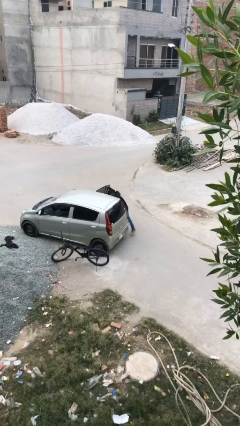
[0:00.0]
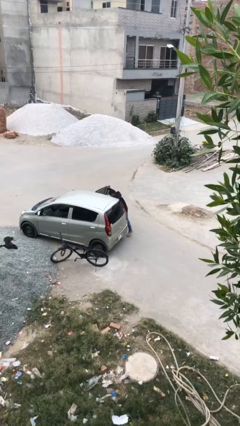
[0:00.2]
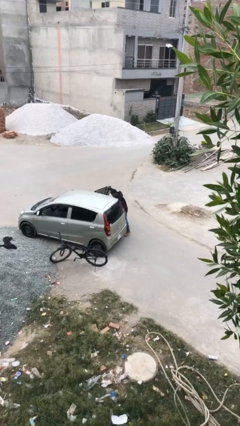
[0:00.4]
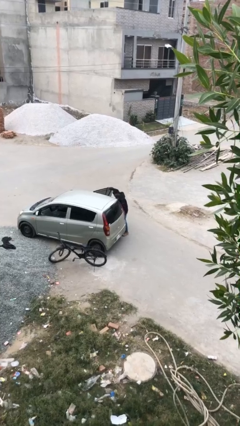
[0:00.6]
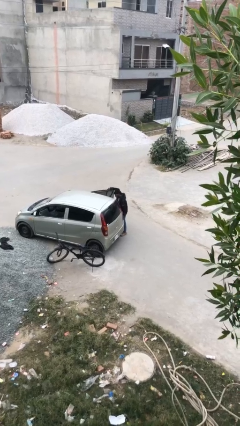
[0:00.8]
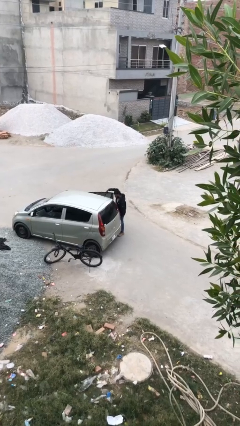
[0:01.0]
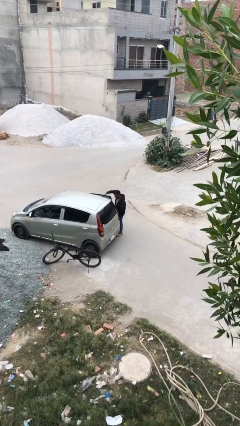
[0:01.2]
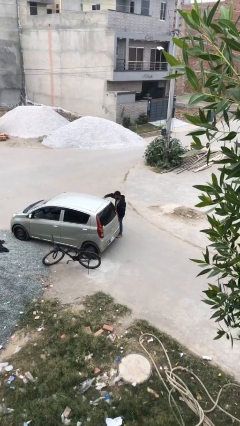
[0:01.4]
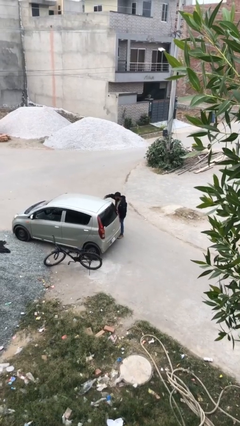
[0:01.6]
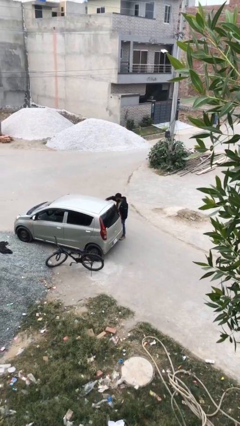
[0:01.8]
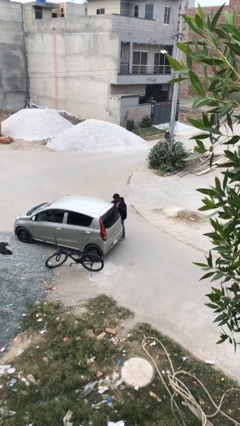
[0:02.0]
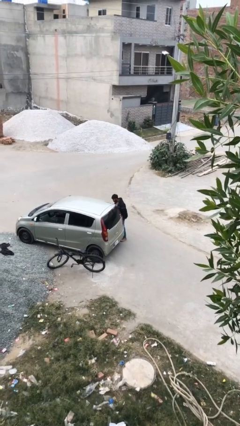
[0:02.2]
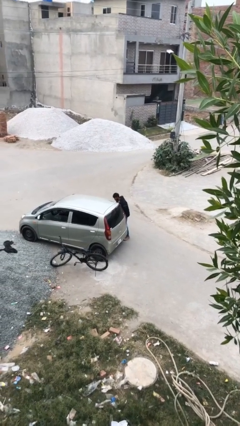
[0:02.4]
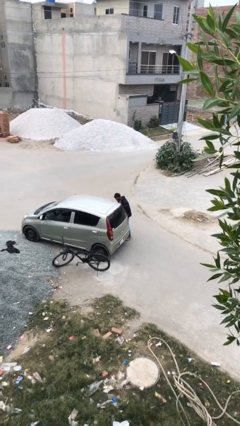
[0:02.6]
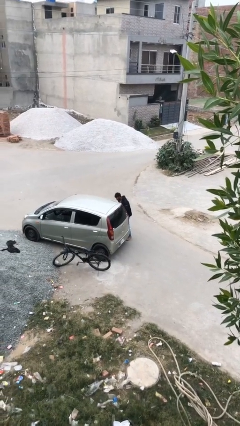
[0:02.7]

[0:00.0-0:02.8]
person closes car door

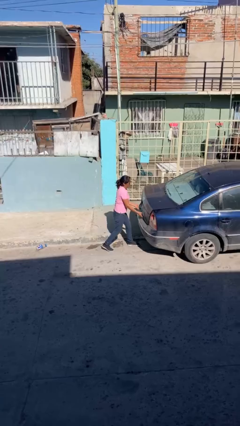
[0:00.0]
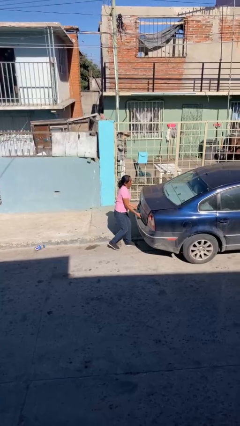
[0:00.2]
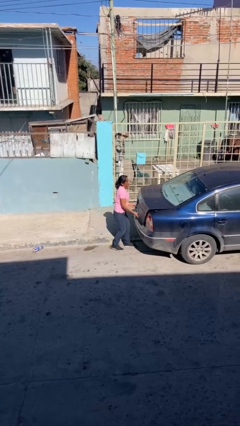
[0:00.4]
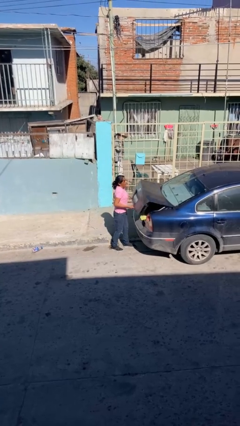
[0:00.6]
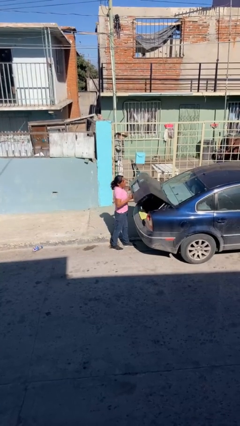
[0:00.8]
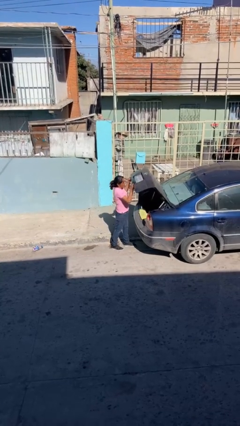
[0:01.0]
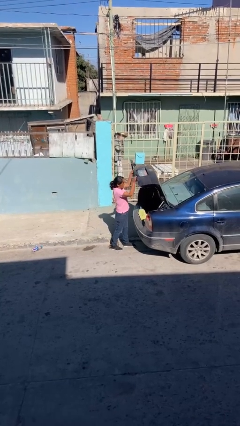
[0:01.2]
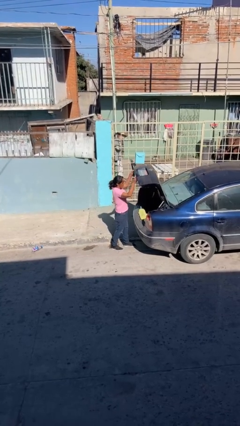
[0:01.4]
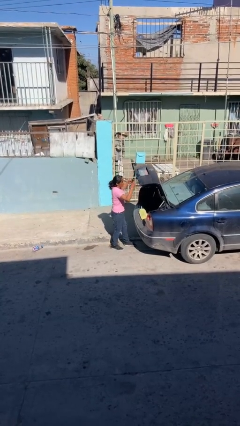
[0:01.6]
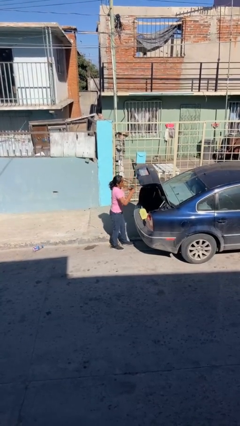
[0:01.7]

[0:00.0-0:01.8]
person opens car trunk

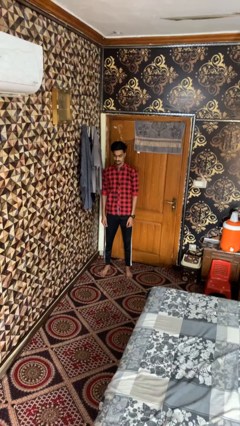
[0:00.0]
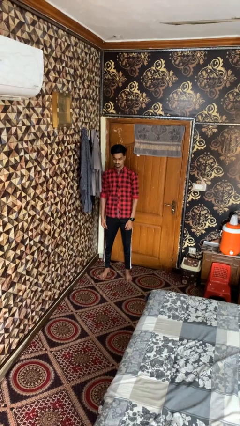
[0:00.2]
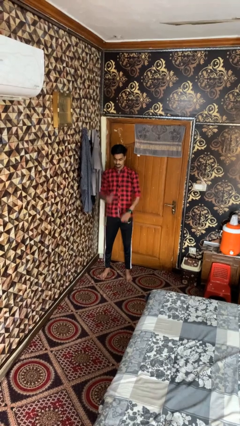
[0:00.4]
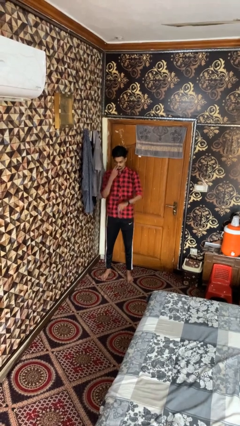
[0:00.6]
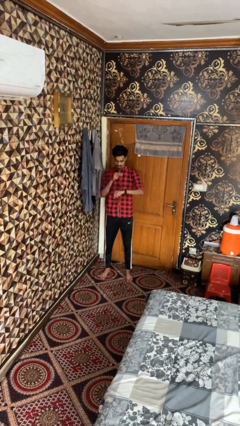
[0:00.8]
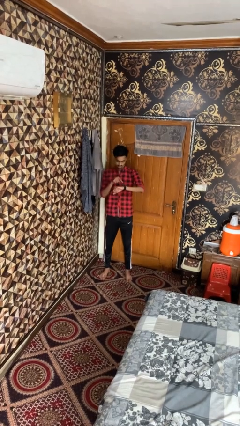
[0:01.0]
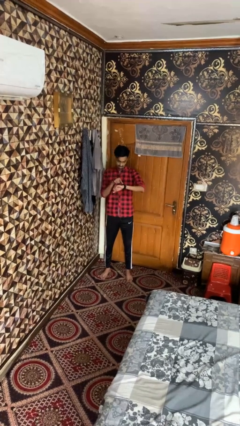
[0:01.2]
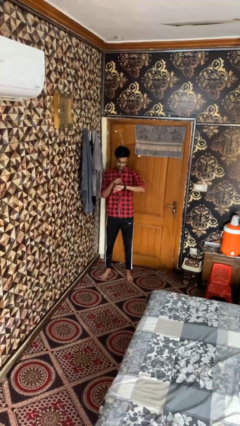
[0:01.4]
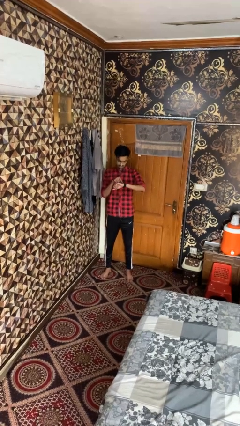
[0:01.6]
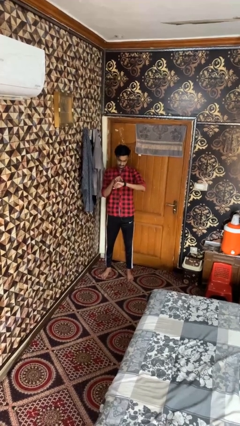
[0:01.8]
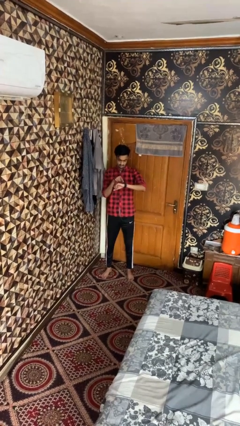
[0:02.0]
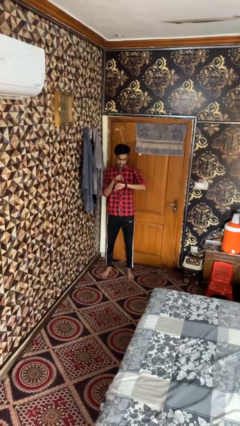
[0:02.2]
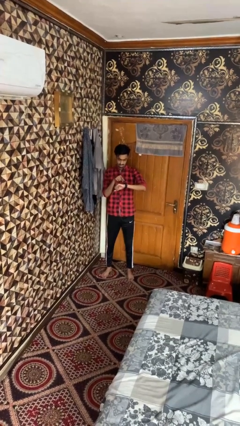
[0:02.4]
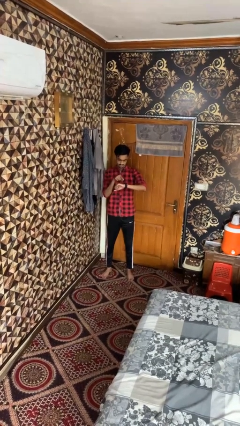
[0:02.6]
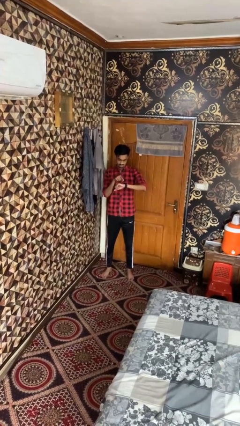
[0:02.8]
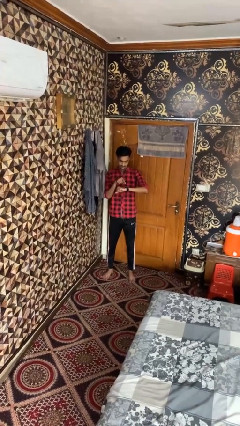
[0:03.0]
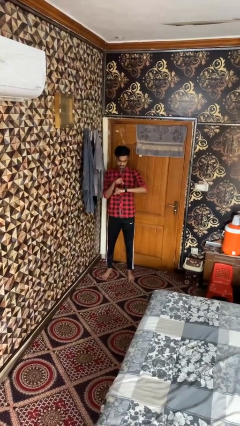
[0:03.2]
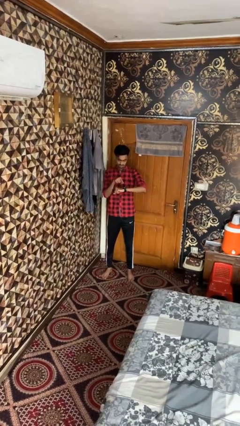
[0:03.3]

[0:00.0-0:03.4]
person gestures watch closely

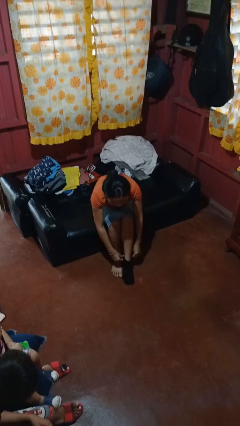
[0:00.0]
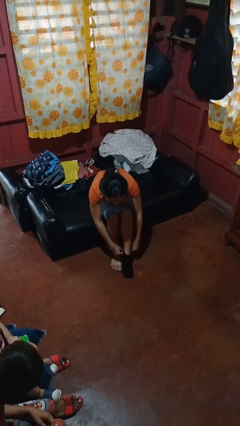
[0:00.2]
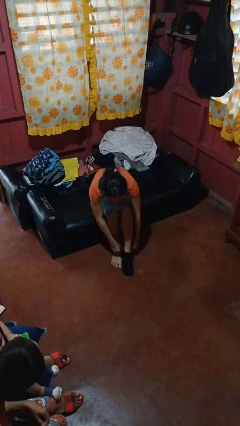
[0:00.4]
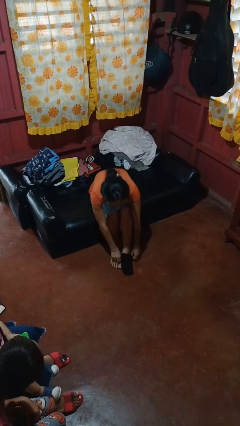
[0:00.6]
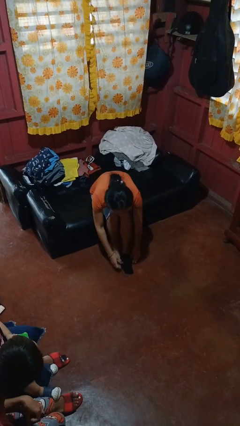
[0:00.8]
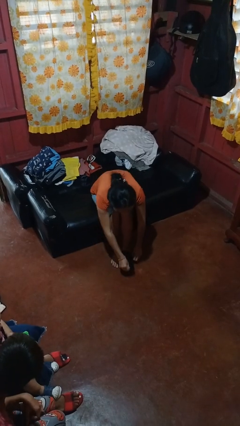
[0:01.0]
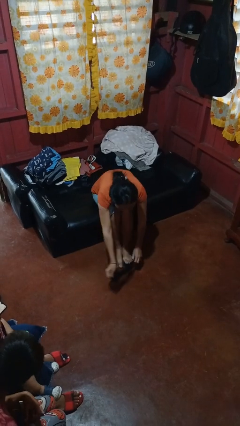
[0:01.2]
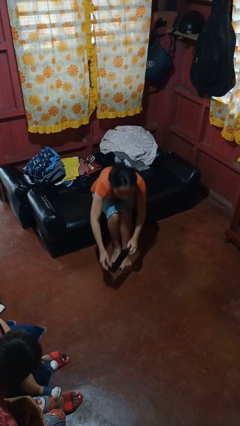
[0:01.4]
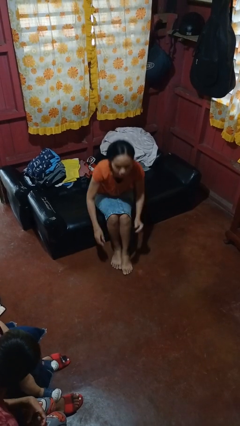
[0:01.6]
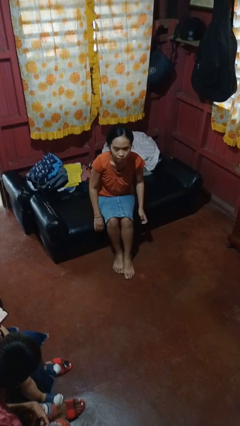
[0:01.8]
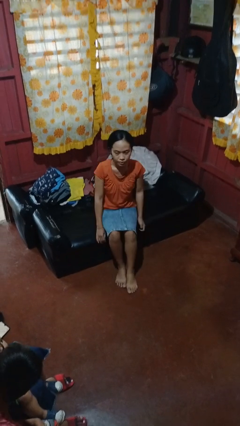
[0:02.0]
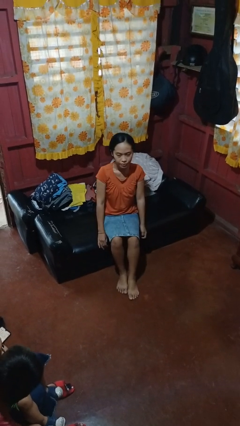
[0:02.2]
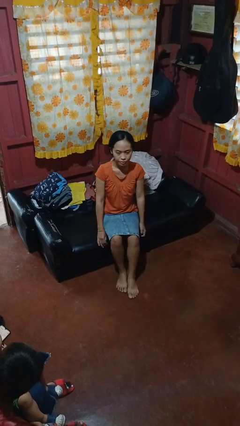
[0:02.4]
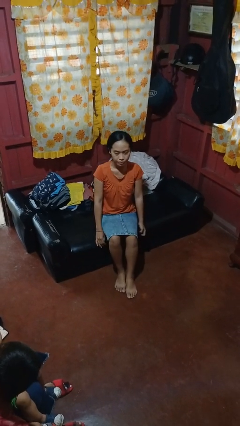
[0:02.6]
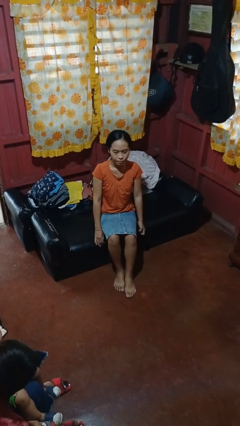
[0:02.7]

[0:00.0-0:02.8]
person takes off socks

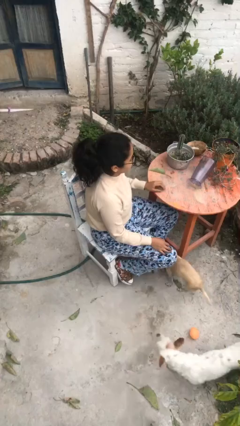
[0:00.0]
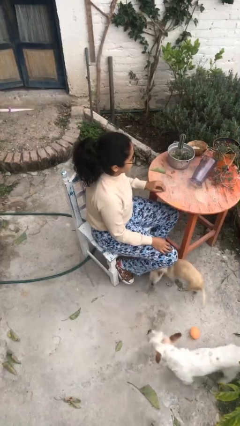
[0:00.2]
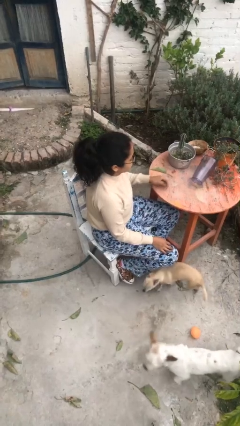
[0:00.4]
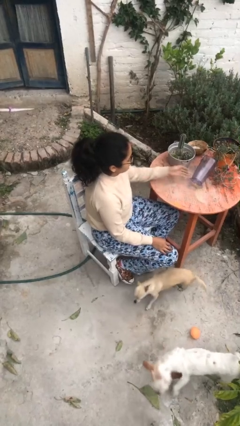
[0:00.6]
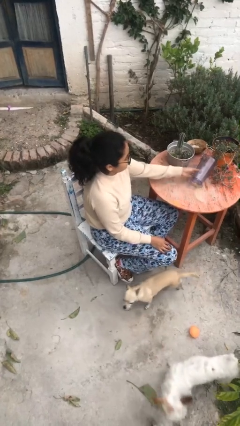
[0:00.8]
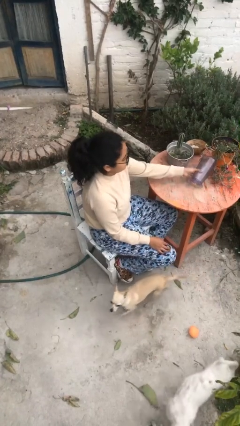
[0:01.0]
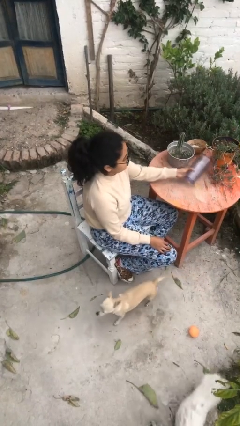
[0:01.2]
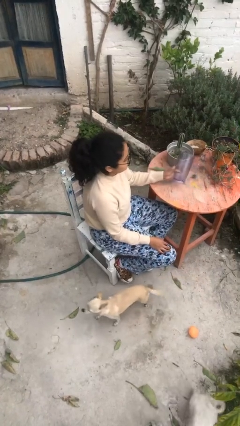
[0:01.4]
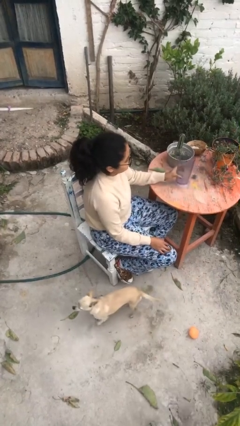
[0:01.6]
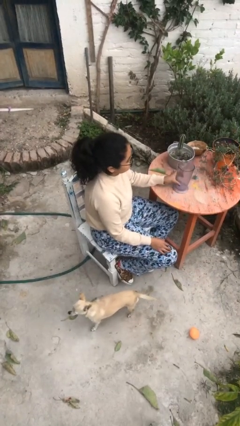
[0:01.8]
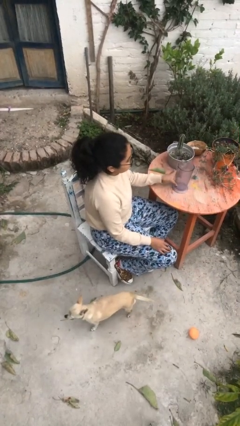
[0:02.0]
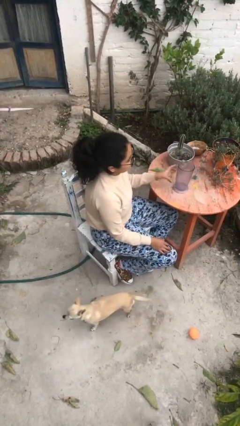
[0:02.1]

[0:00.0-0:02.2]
person sets upright glass

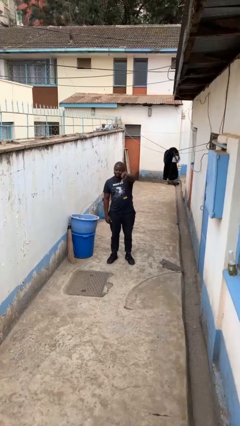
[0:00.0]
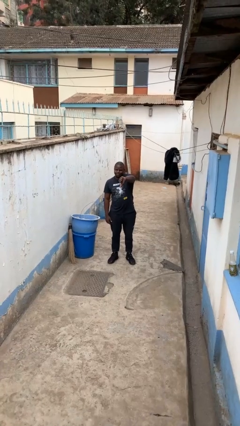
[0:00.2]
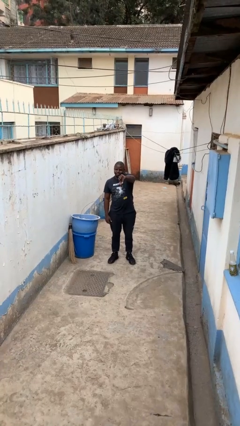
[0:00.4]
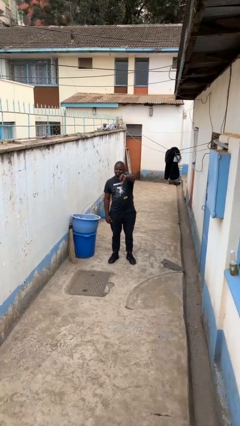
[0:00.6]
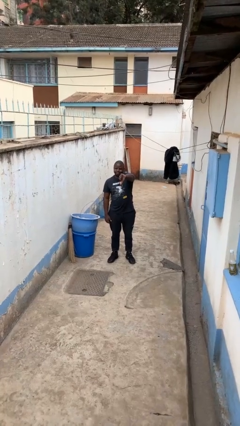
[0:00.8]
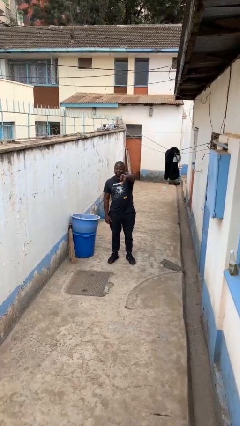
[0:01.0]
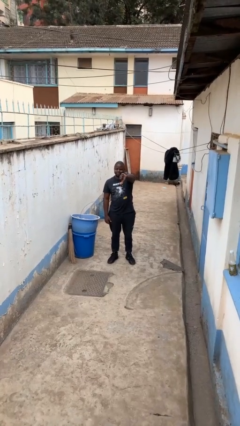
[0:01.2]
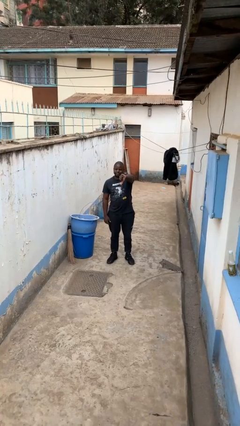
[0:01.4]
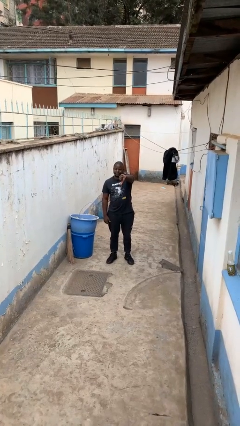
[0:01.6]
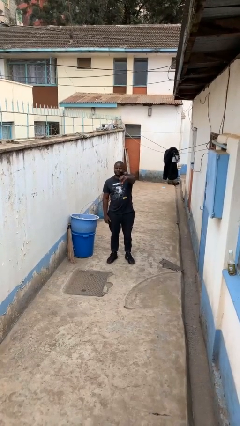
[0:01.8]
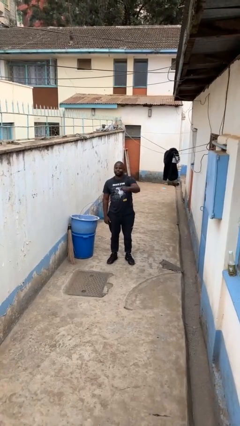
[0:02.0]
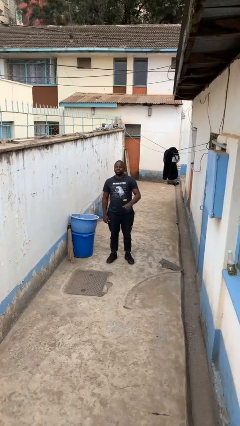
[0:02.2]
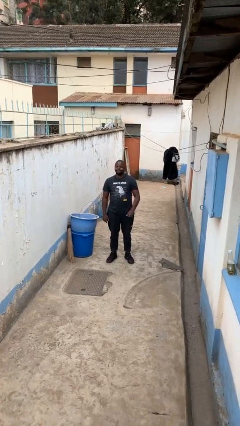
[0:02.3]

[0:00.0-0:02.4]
person gestures thumbs down

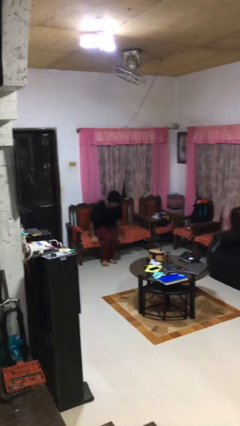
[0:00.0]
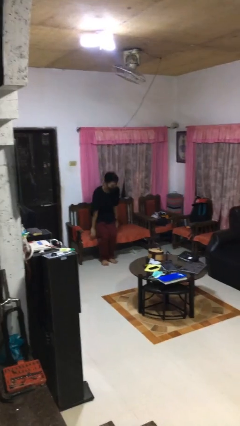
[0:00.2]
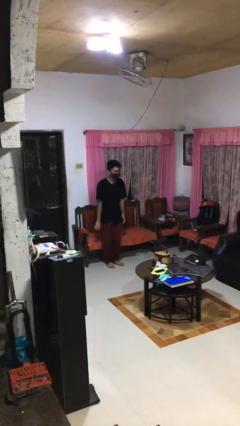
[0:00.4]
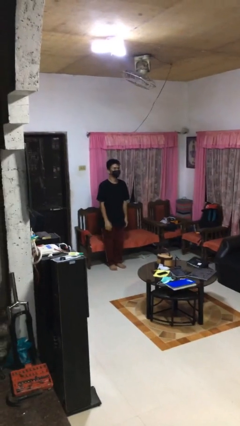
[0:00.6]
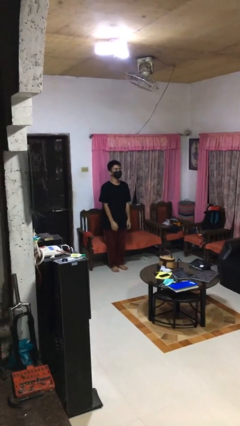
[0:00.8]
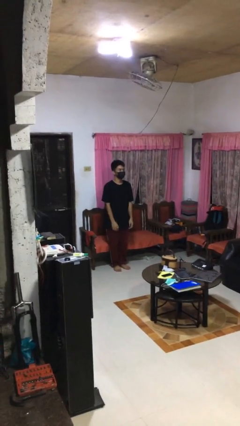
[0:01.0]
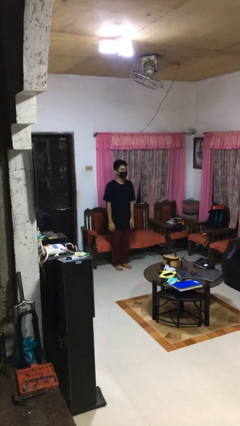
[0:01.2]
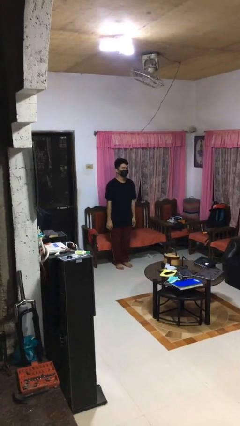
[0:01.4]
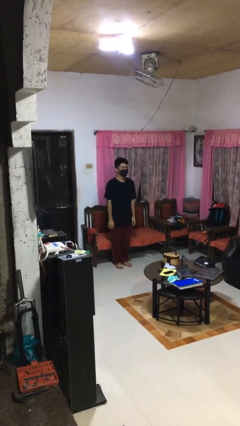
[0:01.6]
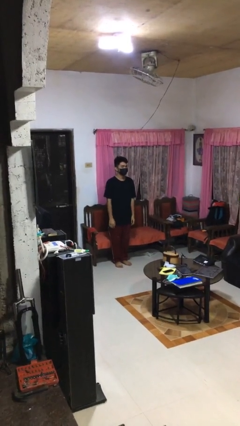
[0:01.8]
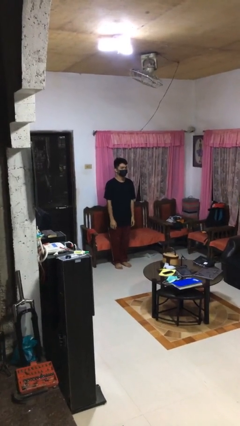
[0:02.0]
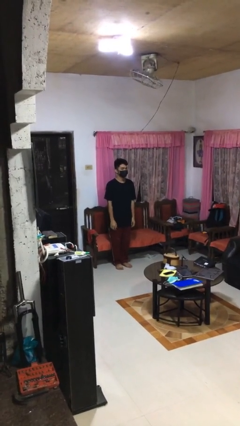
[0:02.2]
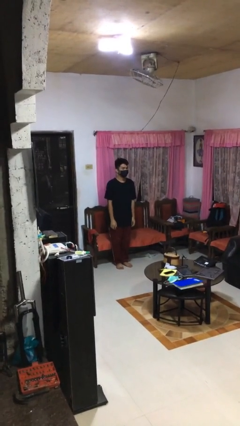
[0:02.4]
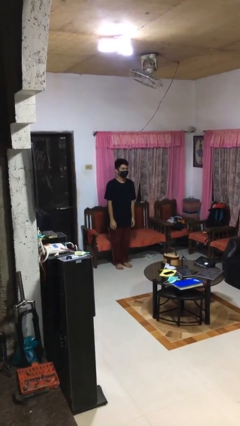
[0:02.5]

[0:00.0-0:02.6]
person stands up
